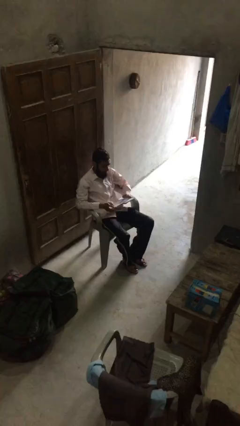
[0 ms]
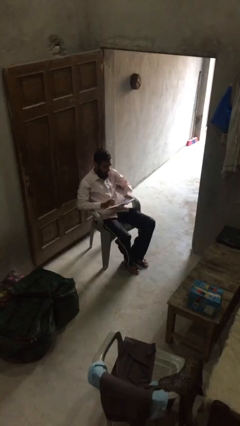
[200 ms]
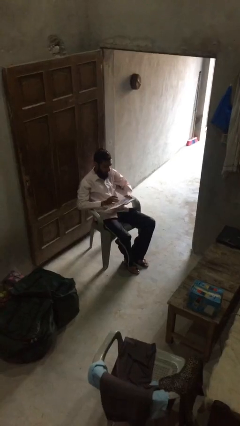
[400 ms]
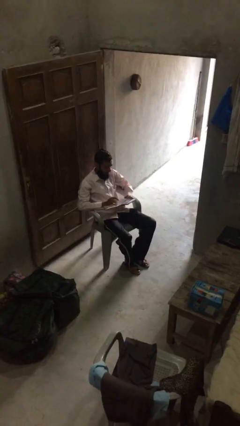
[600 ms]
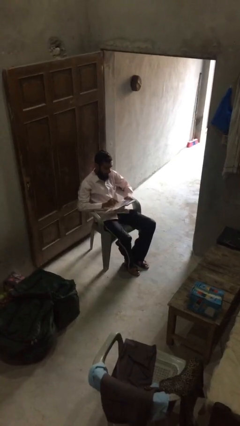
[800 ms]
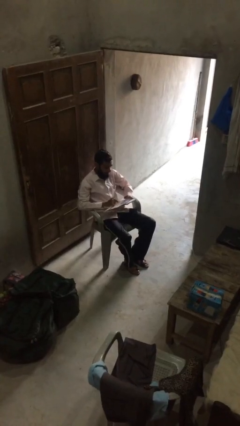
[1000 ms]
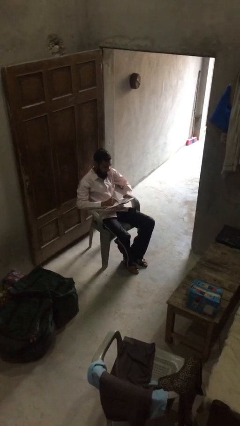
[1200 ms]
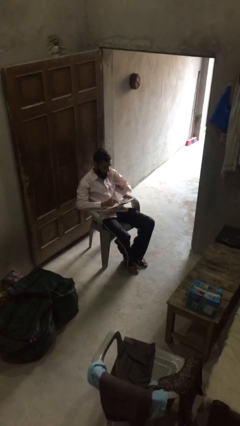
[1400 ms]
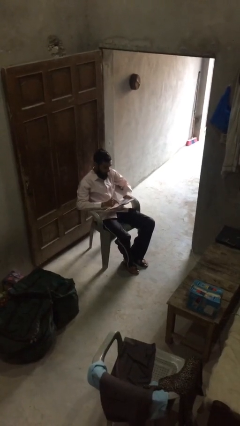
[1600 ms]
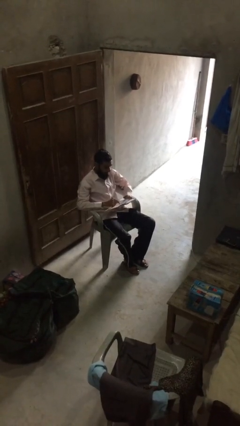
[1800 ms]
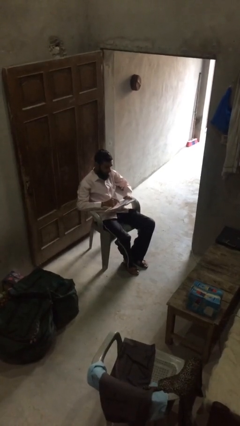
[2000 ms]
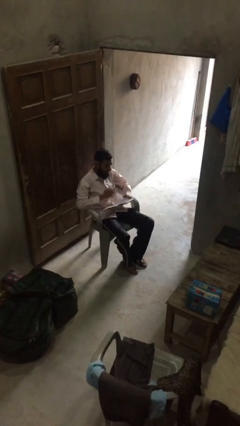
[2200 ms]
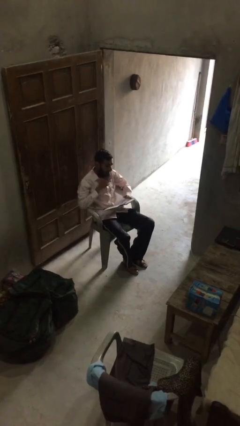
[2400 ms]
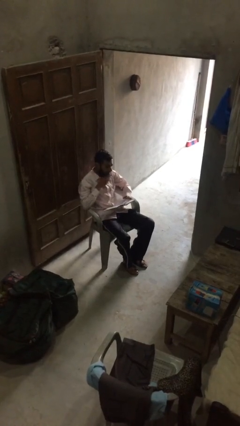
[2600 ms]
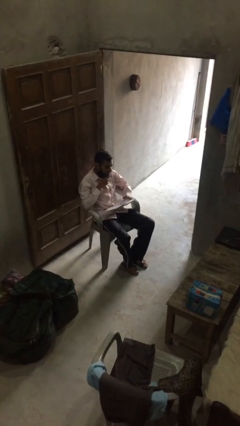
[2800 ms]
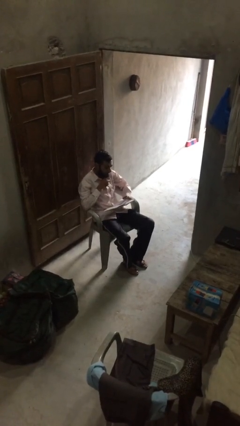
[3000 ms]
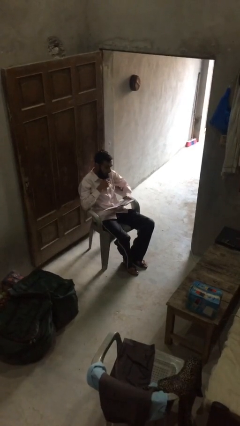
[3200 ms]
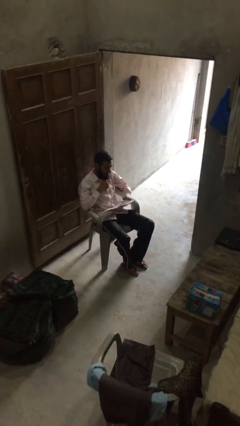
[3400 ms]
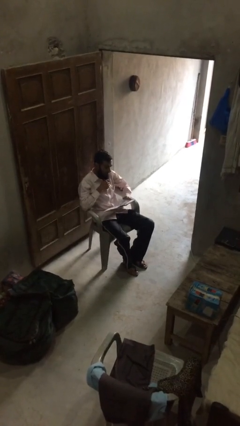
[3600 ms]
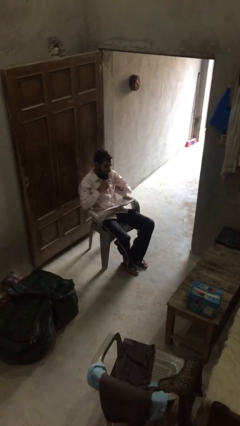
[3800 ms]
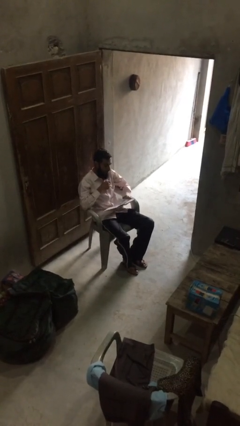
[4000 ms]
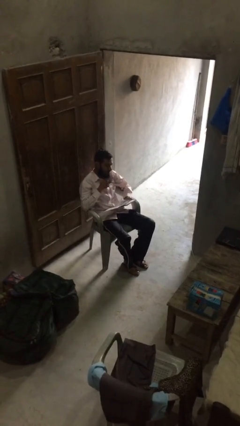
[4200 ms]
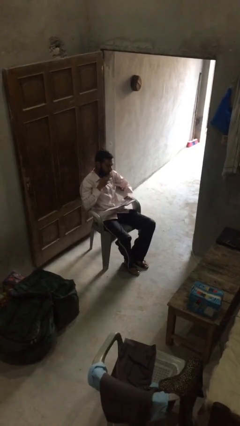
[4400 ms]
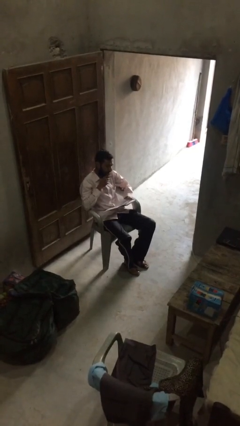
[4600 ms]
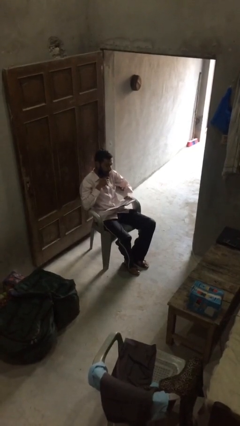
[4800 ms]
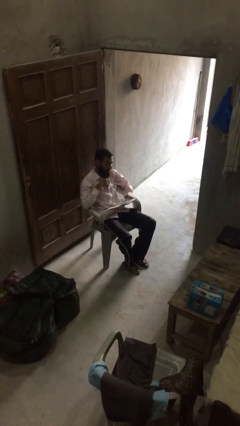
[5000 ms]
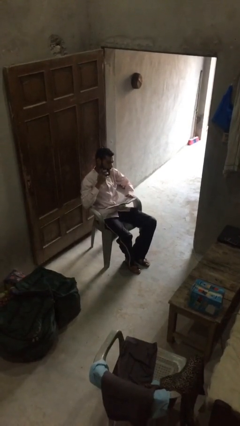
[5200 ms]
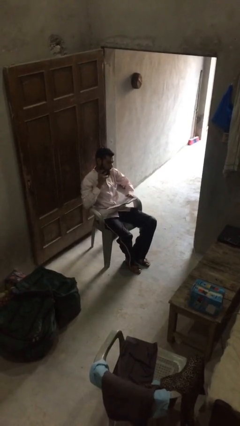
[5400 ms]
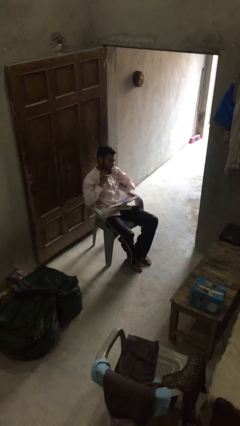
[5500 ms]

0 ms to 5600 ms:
person reads document

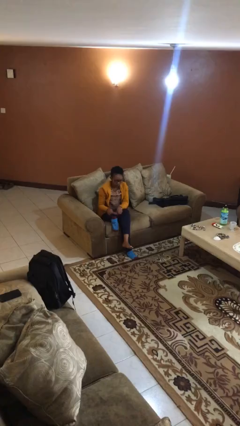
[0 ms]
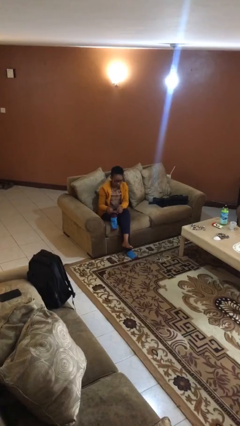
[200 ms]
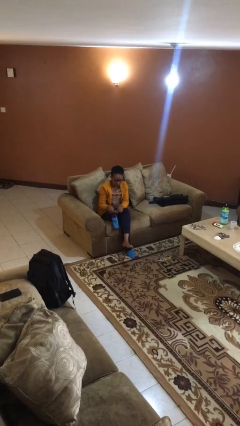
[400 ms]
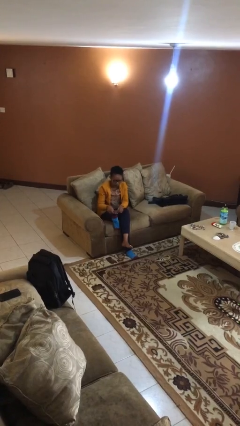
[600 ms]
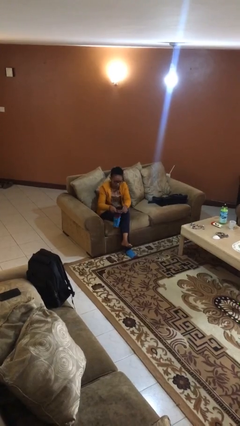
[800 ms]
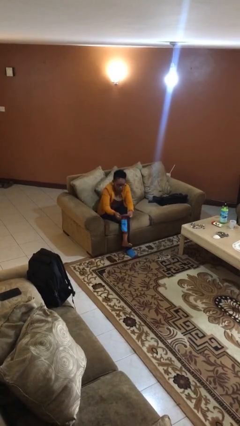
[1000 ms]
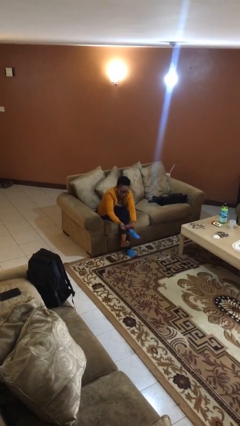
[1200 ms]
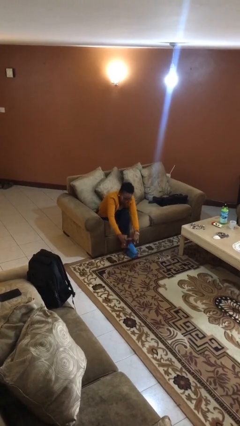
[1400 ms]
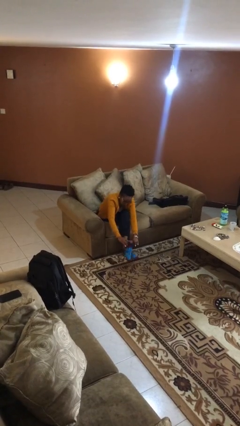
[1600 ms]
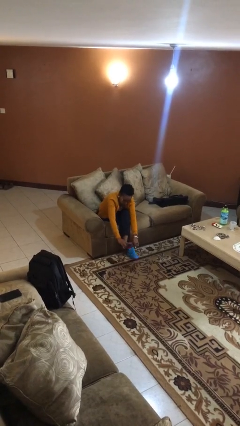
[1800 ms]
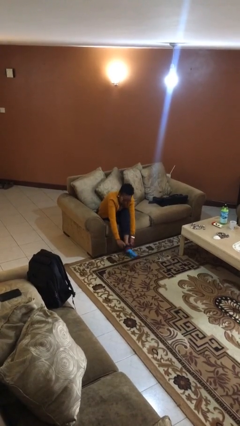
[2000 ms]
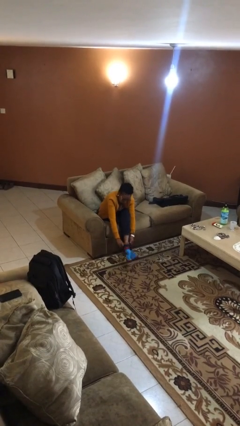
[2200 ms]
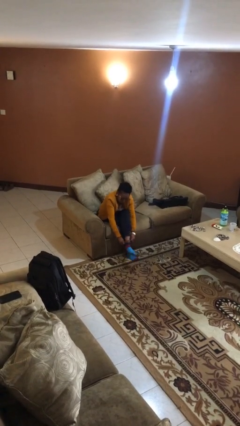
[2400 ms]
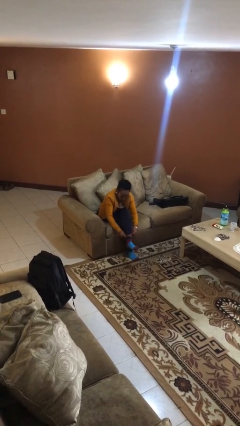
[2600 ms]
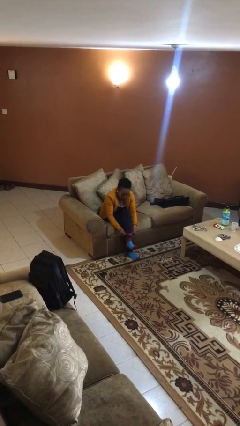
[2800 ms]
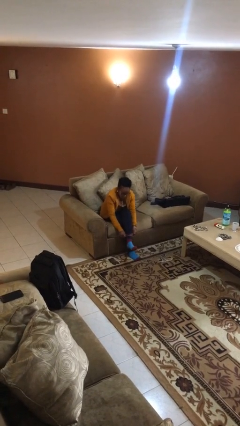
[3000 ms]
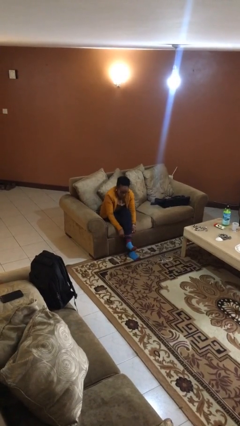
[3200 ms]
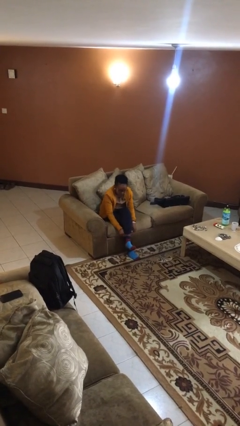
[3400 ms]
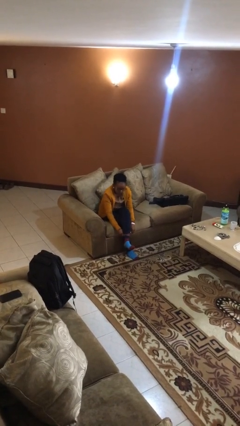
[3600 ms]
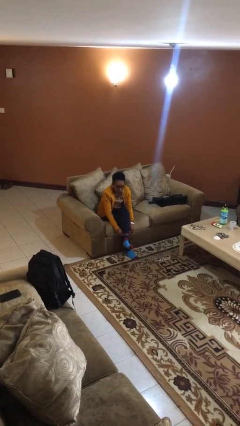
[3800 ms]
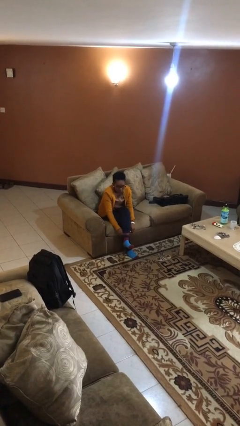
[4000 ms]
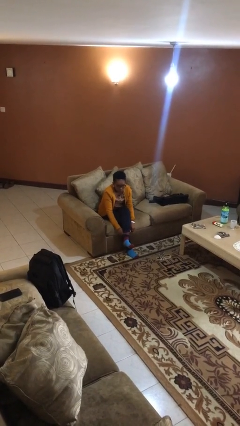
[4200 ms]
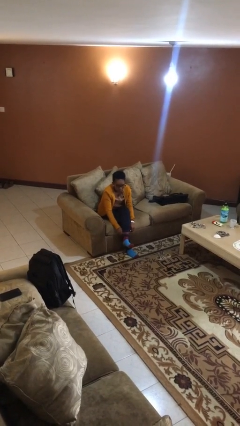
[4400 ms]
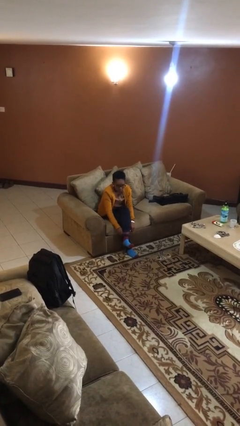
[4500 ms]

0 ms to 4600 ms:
person puts on socks

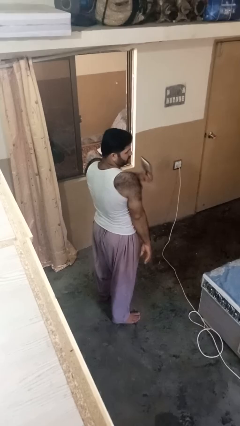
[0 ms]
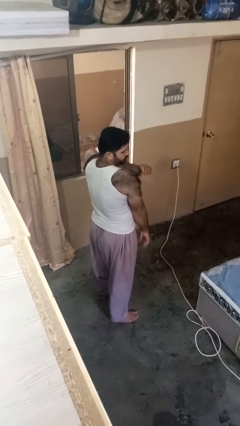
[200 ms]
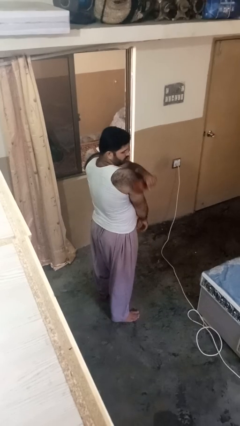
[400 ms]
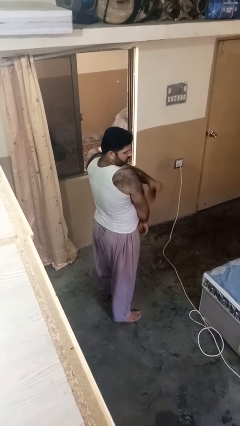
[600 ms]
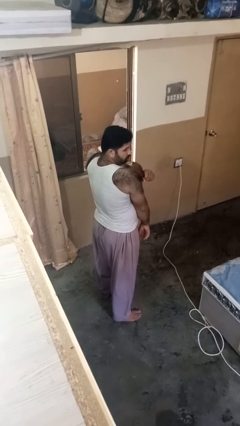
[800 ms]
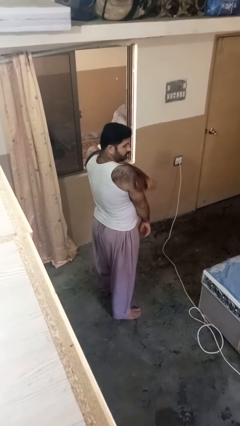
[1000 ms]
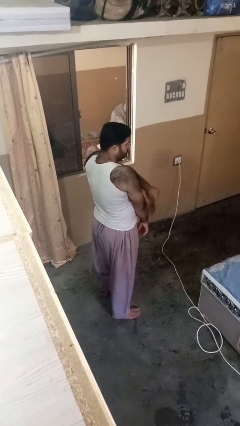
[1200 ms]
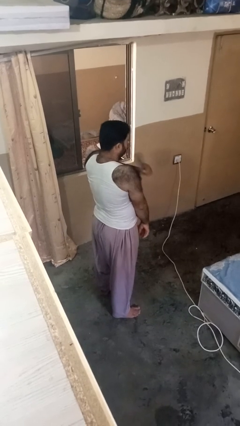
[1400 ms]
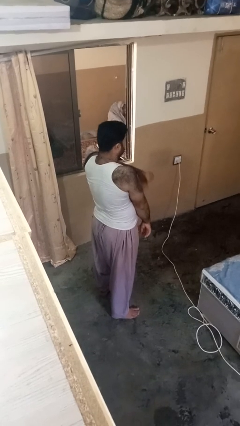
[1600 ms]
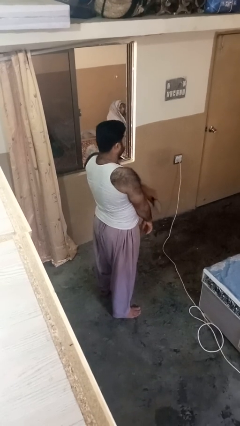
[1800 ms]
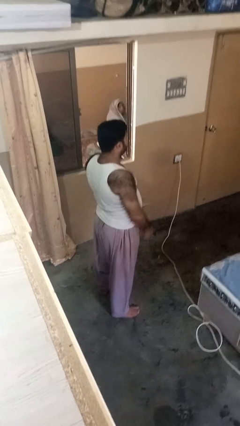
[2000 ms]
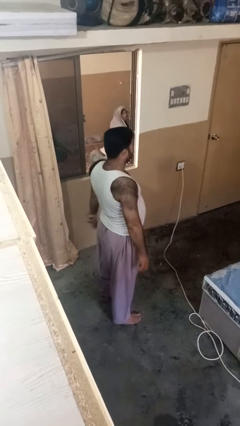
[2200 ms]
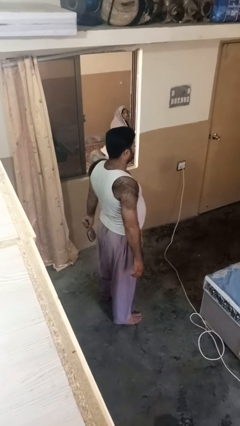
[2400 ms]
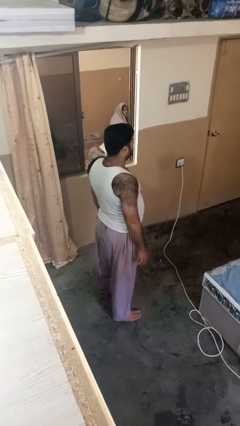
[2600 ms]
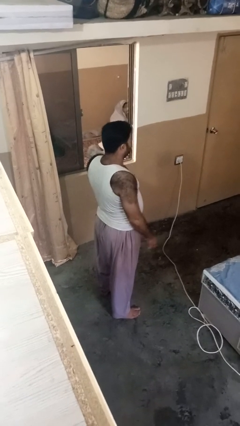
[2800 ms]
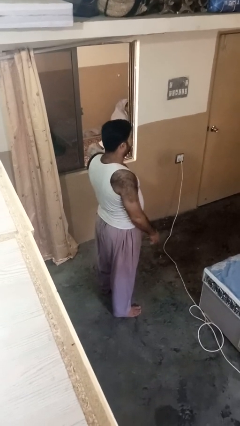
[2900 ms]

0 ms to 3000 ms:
person brushes hair

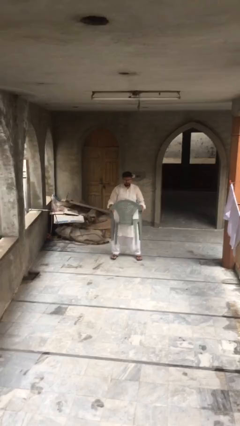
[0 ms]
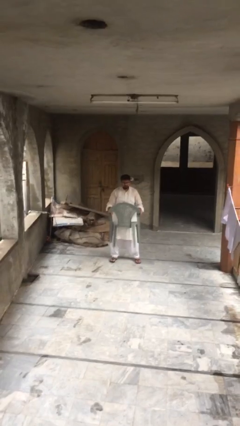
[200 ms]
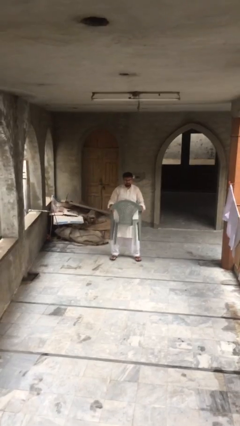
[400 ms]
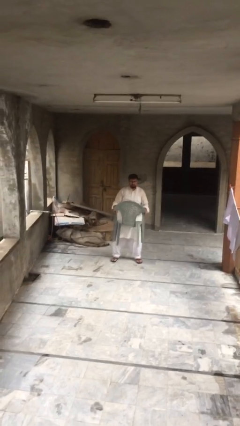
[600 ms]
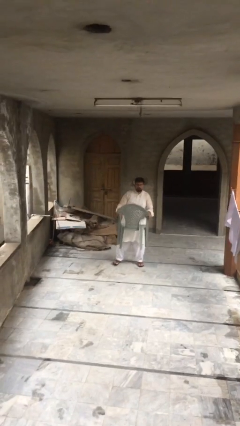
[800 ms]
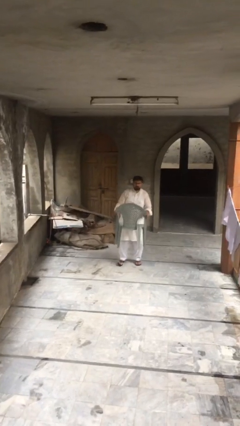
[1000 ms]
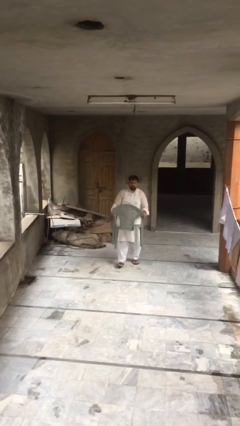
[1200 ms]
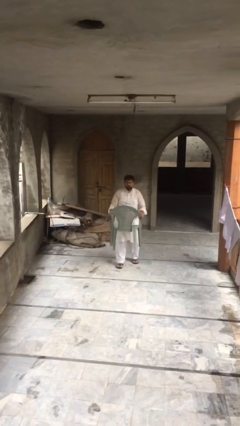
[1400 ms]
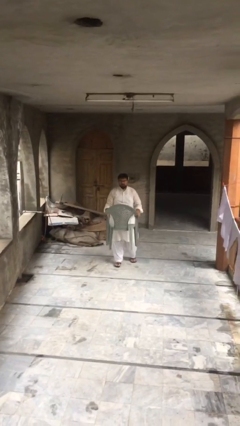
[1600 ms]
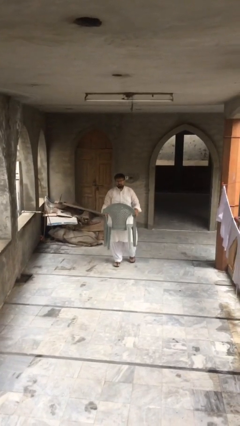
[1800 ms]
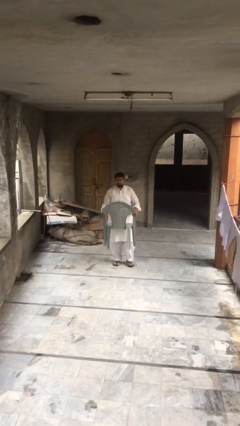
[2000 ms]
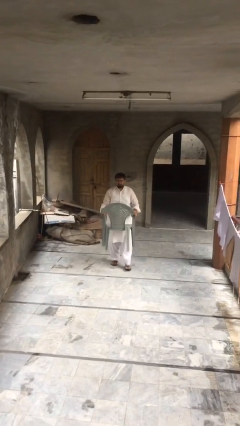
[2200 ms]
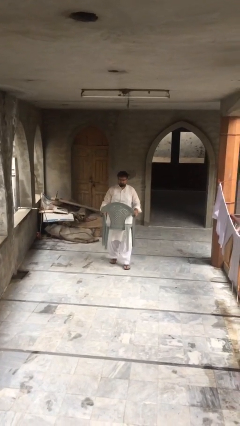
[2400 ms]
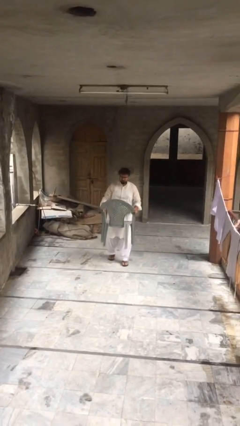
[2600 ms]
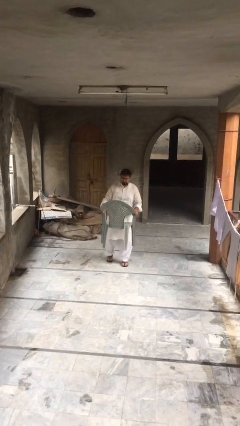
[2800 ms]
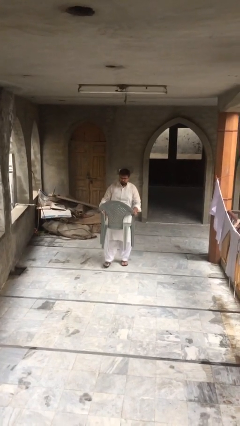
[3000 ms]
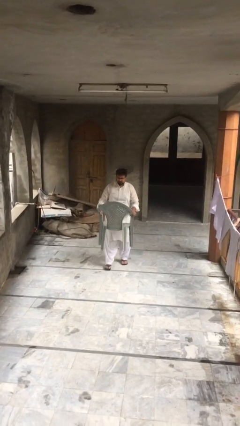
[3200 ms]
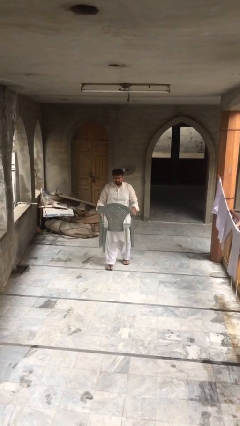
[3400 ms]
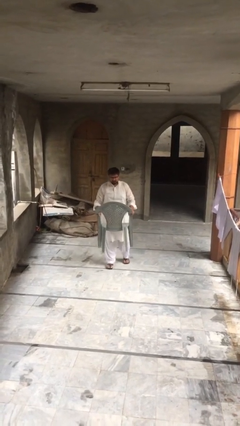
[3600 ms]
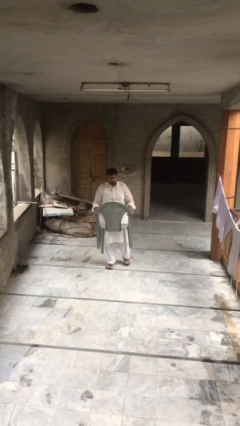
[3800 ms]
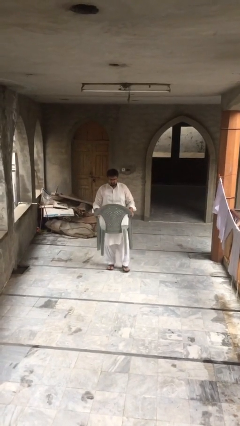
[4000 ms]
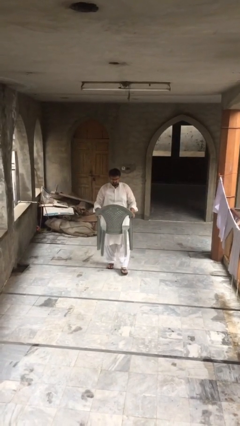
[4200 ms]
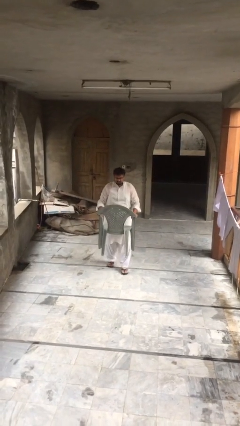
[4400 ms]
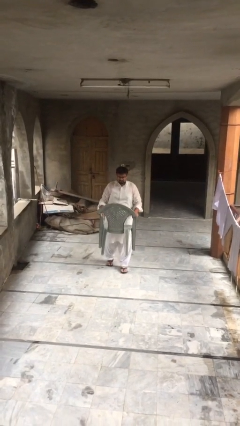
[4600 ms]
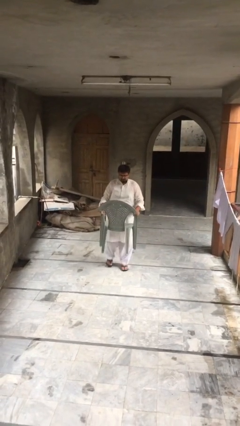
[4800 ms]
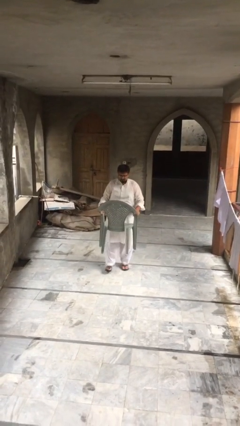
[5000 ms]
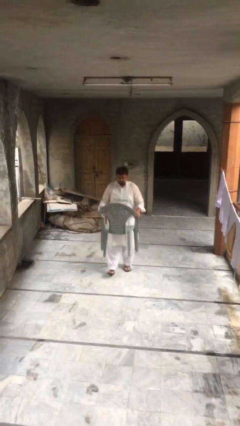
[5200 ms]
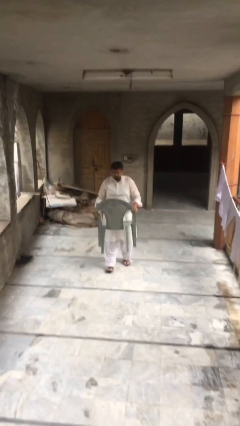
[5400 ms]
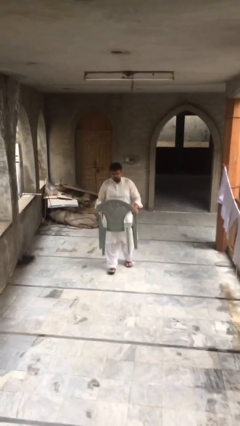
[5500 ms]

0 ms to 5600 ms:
person carries heavy object
